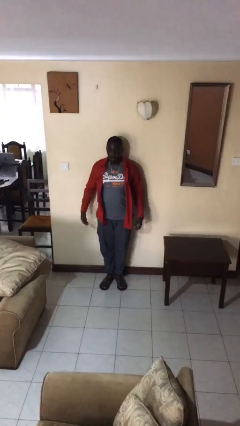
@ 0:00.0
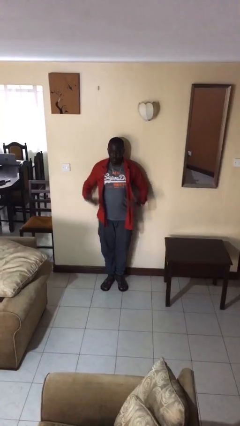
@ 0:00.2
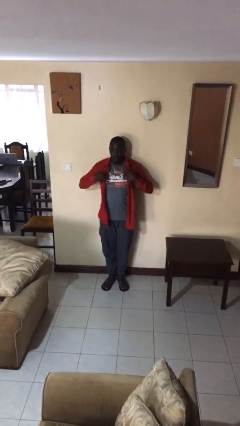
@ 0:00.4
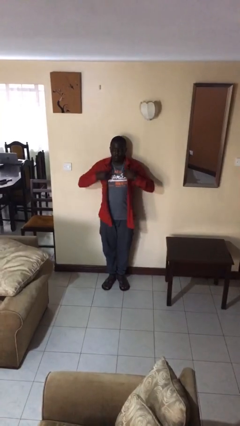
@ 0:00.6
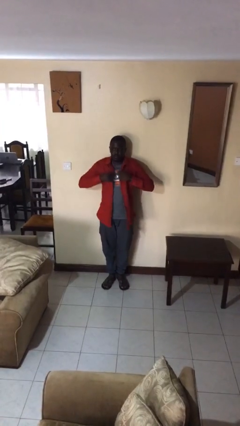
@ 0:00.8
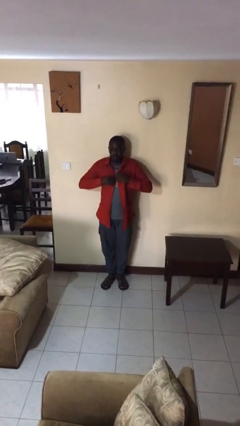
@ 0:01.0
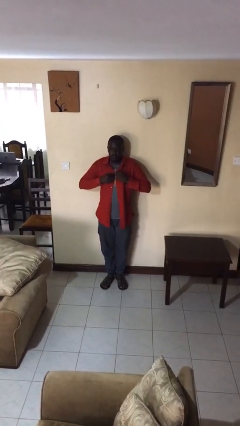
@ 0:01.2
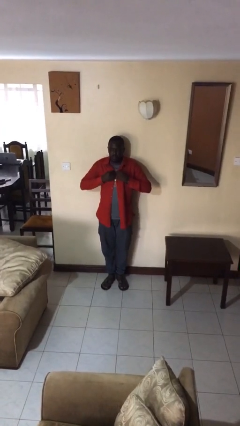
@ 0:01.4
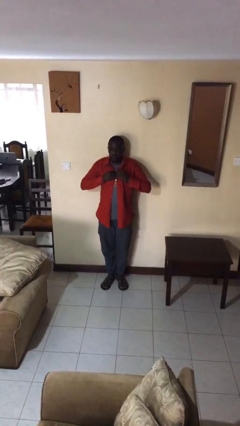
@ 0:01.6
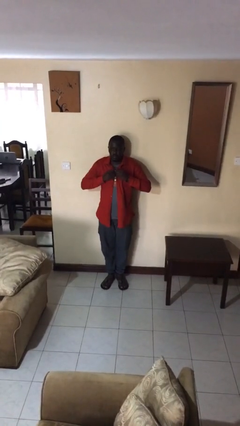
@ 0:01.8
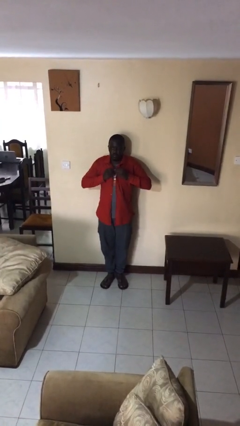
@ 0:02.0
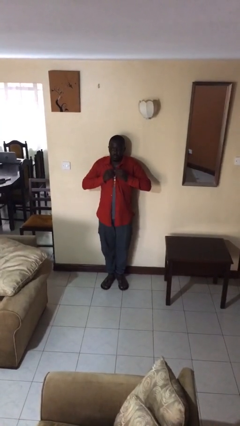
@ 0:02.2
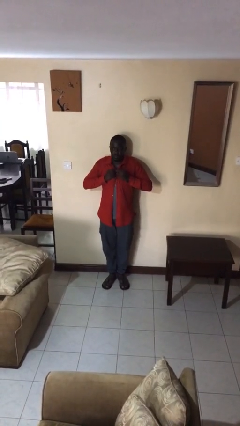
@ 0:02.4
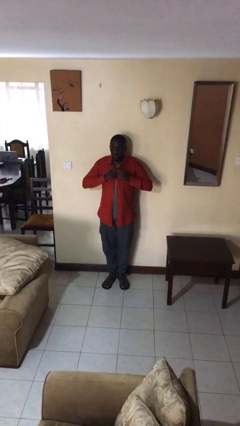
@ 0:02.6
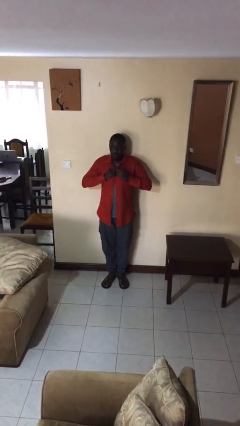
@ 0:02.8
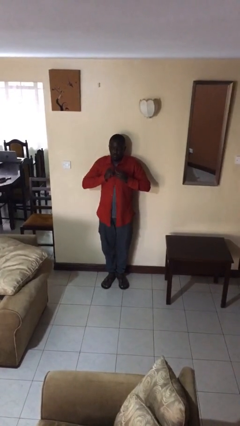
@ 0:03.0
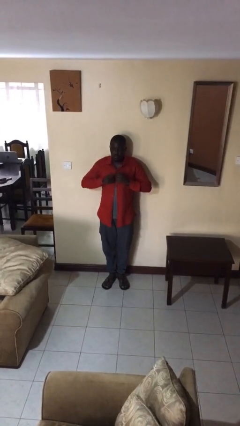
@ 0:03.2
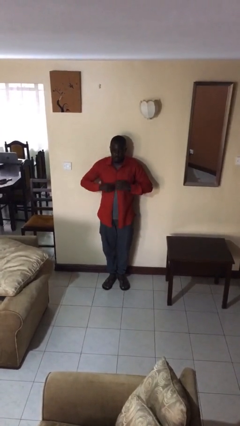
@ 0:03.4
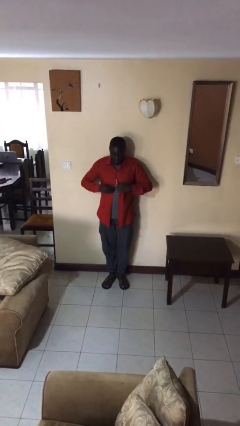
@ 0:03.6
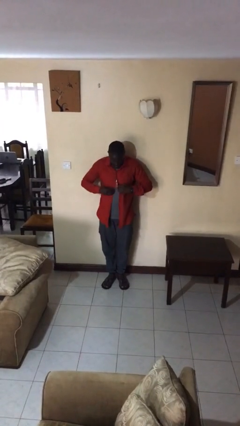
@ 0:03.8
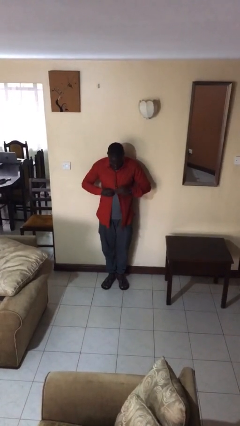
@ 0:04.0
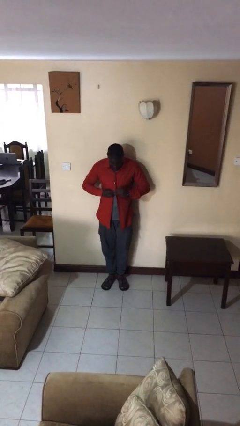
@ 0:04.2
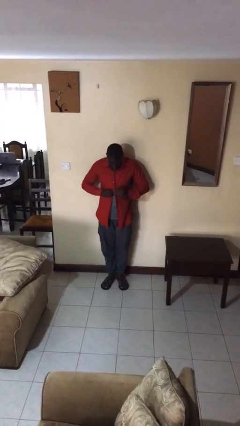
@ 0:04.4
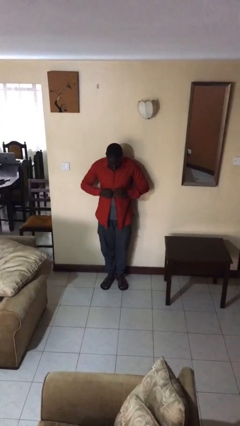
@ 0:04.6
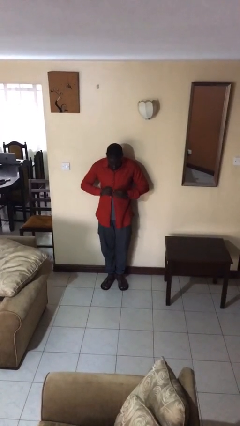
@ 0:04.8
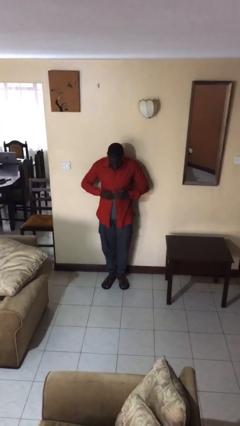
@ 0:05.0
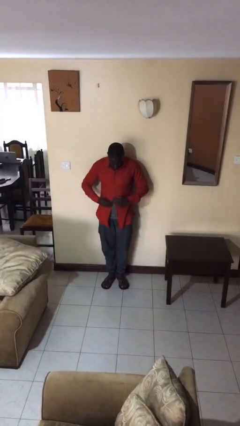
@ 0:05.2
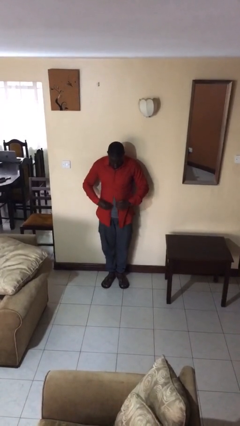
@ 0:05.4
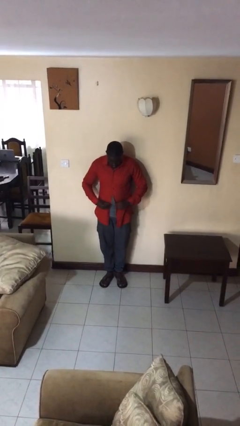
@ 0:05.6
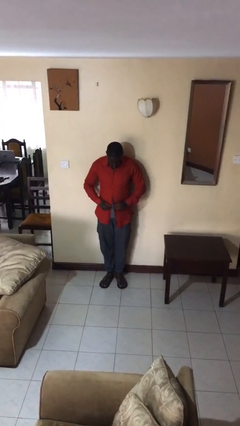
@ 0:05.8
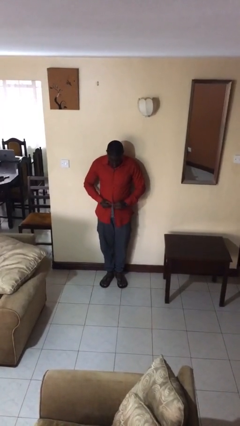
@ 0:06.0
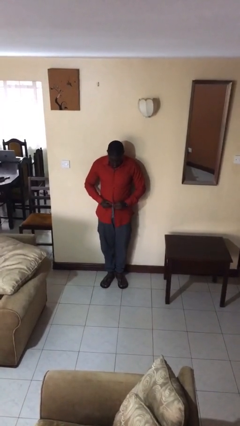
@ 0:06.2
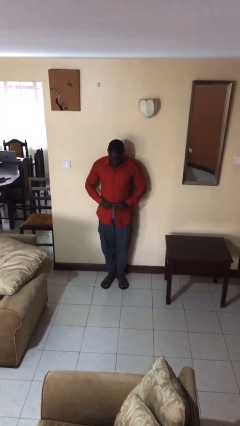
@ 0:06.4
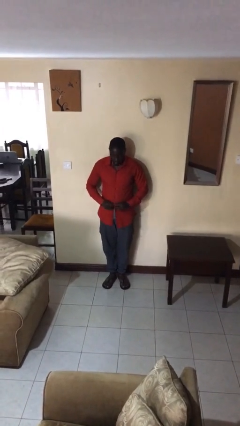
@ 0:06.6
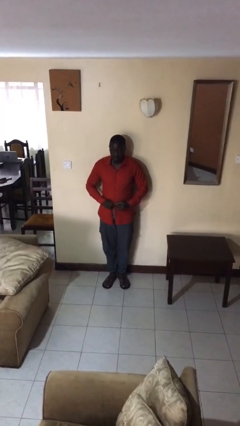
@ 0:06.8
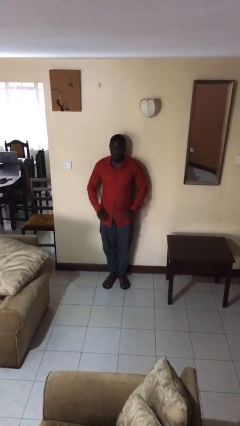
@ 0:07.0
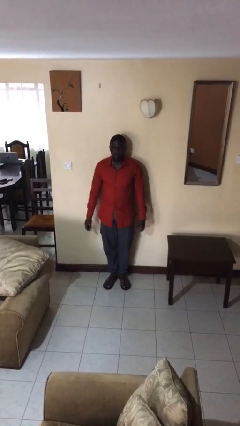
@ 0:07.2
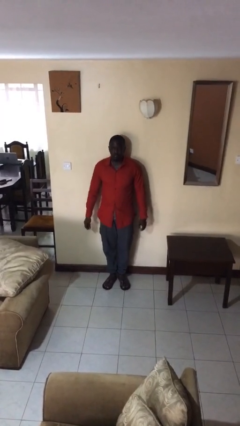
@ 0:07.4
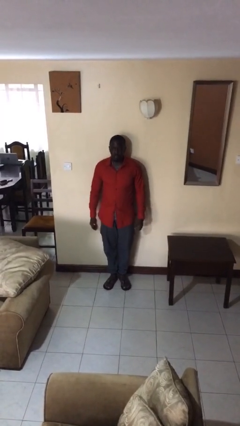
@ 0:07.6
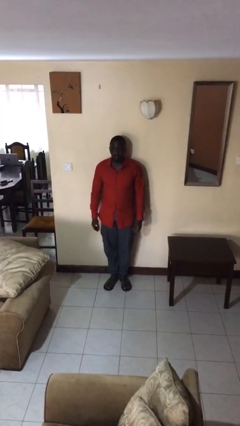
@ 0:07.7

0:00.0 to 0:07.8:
person buttons shirt

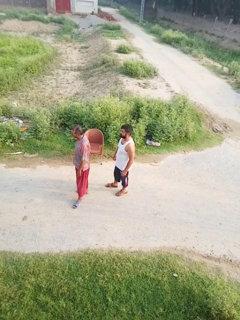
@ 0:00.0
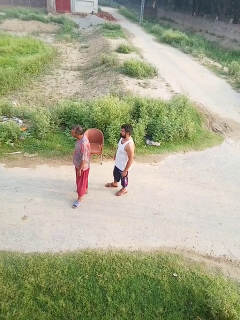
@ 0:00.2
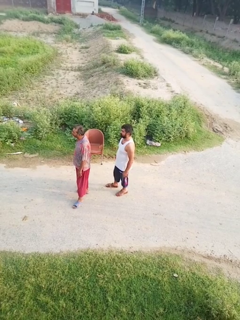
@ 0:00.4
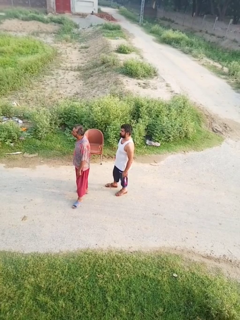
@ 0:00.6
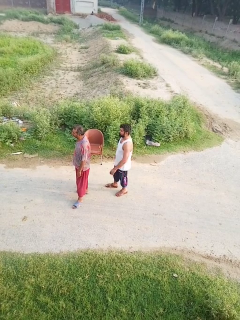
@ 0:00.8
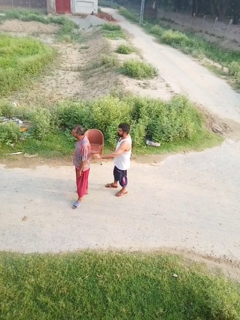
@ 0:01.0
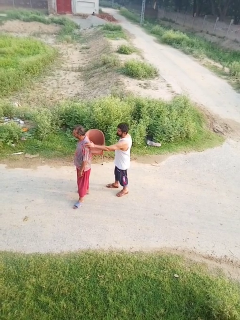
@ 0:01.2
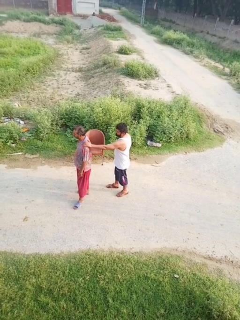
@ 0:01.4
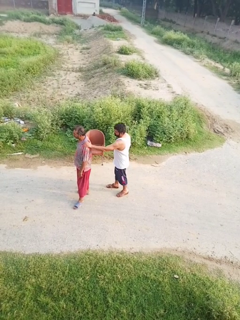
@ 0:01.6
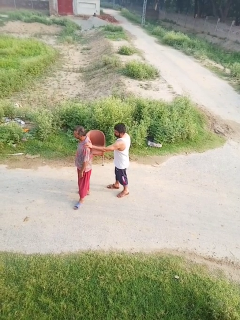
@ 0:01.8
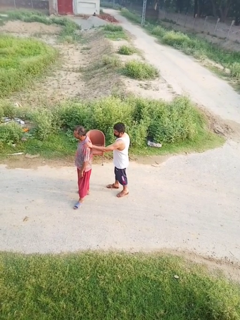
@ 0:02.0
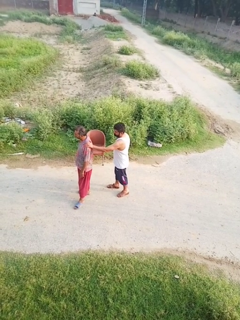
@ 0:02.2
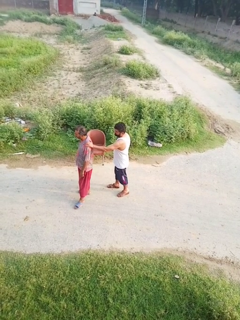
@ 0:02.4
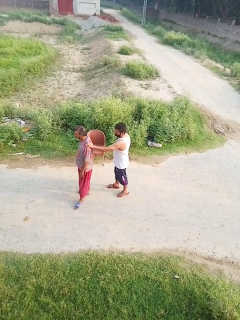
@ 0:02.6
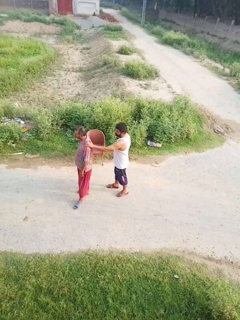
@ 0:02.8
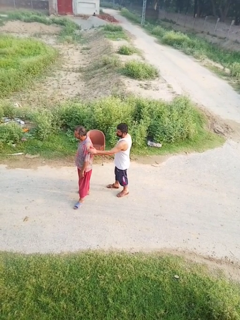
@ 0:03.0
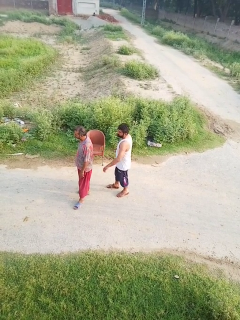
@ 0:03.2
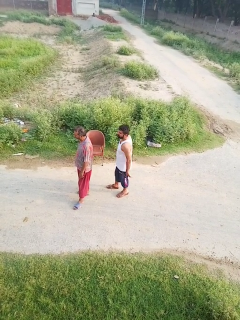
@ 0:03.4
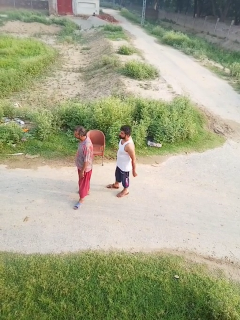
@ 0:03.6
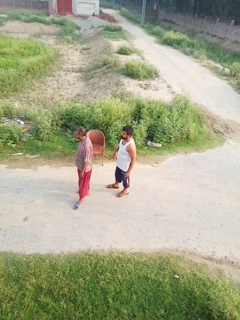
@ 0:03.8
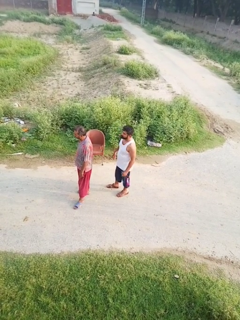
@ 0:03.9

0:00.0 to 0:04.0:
person touches back of person

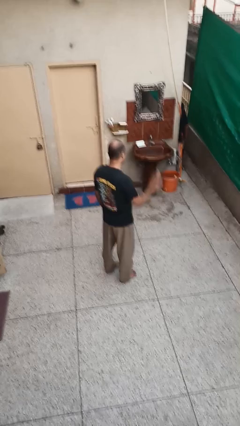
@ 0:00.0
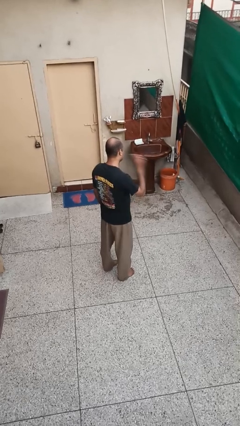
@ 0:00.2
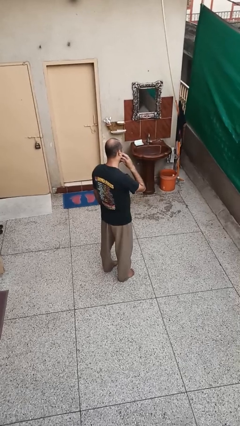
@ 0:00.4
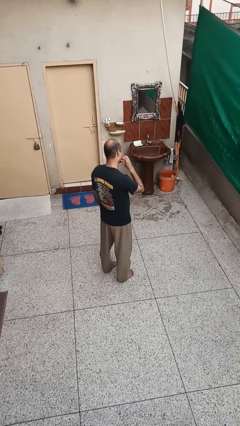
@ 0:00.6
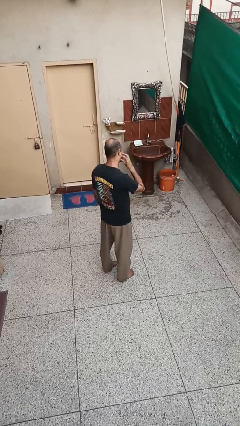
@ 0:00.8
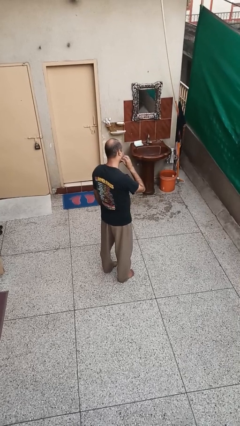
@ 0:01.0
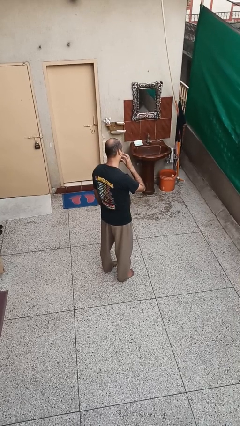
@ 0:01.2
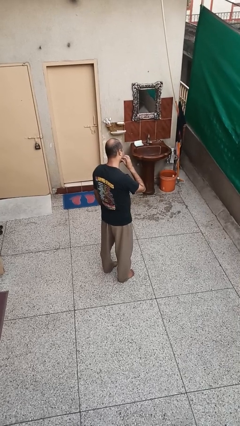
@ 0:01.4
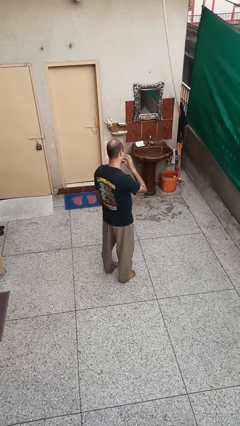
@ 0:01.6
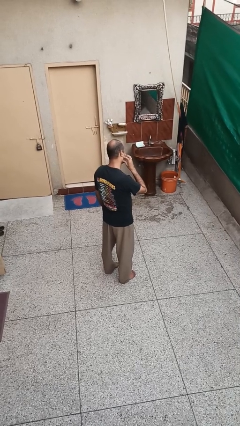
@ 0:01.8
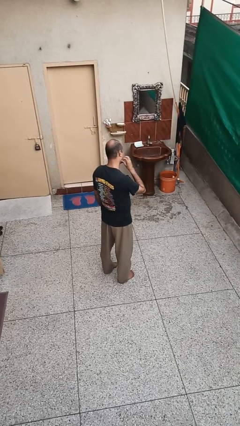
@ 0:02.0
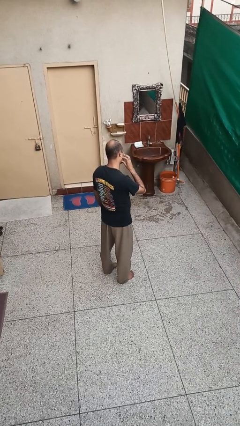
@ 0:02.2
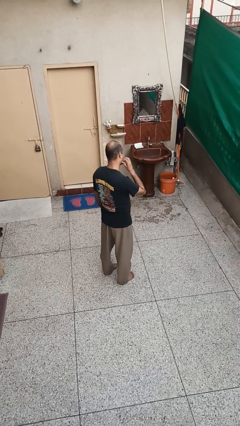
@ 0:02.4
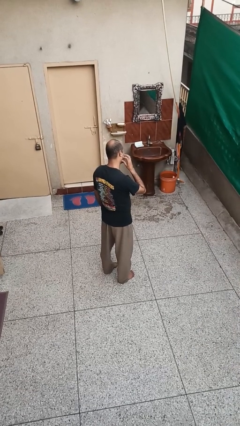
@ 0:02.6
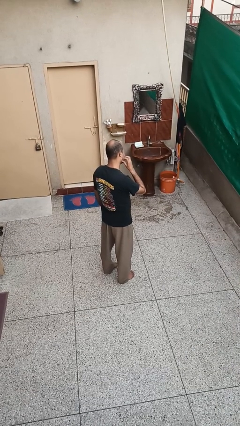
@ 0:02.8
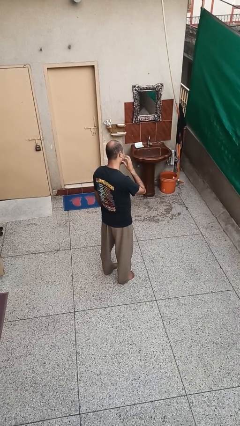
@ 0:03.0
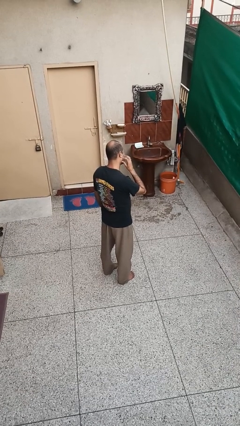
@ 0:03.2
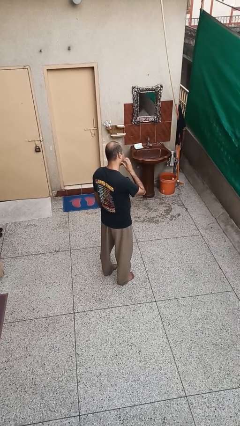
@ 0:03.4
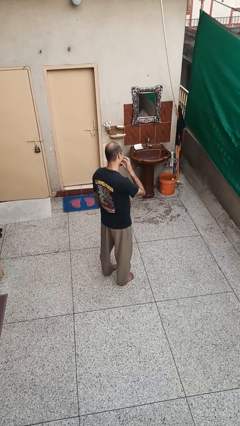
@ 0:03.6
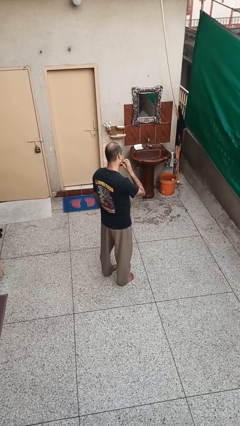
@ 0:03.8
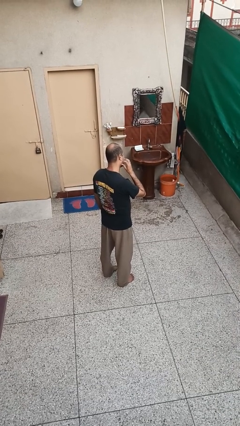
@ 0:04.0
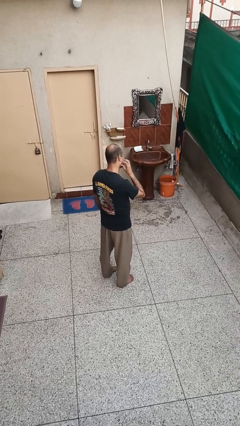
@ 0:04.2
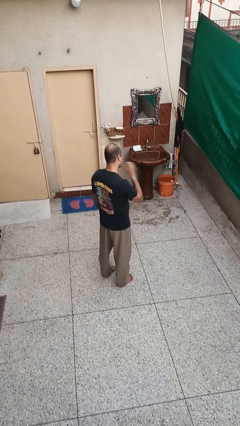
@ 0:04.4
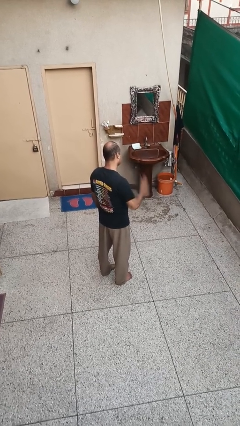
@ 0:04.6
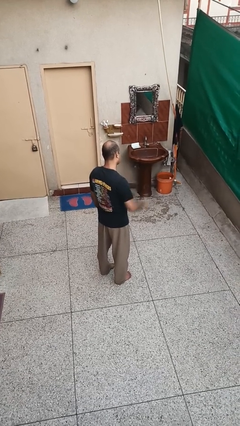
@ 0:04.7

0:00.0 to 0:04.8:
person scratches face

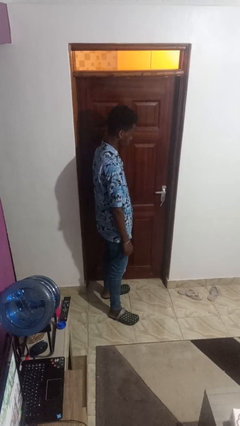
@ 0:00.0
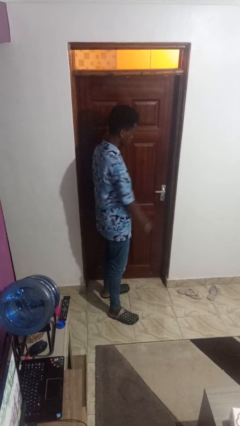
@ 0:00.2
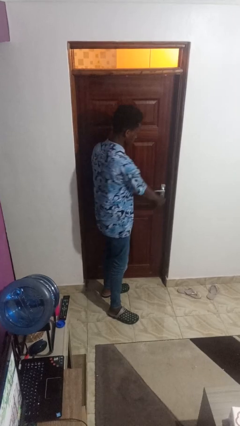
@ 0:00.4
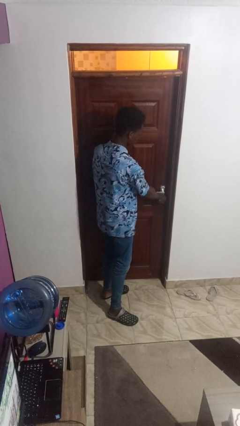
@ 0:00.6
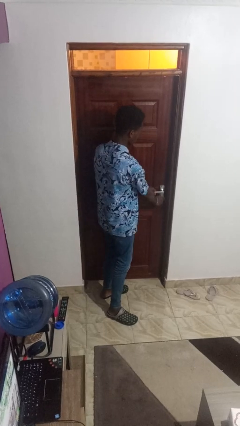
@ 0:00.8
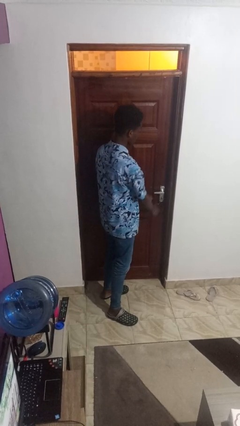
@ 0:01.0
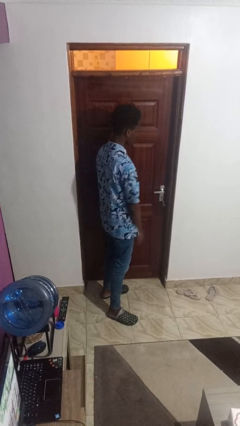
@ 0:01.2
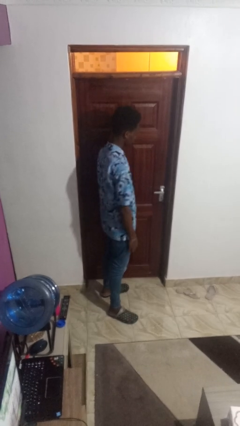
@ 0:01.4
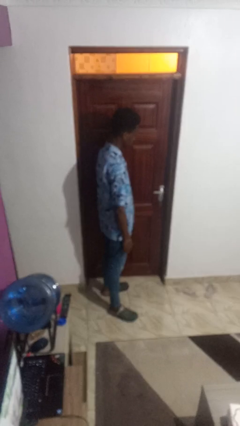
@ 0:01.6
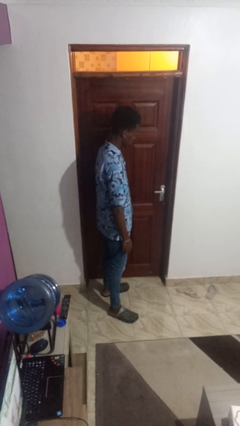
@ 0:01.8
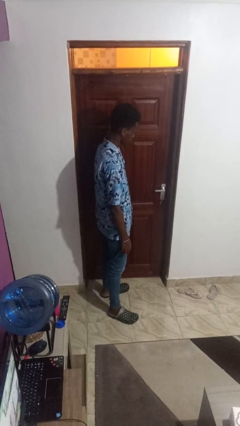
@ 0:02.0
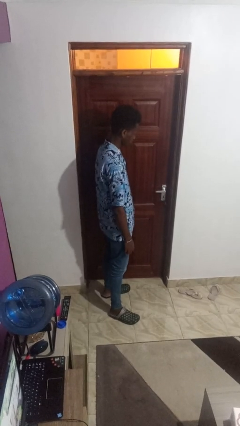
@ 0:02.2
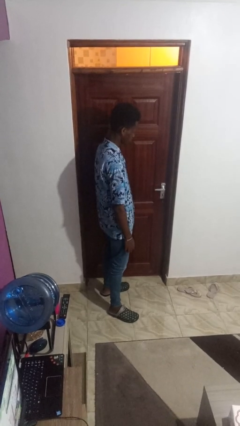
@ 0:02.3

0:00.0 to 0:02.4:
person unlocks door with keys
